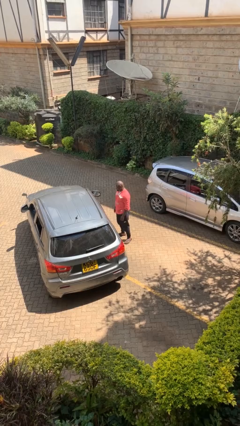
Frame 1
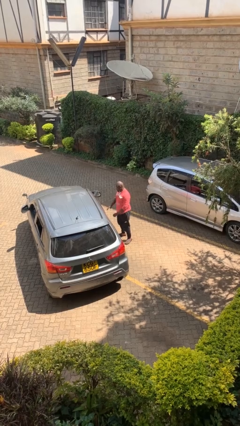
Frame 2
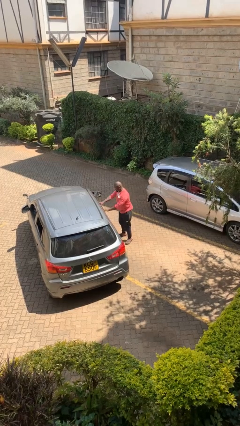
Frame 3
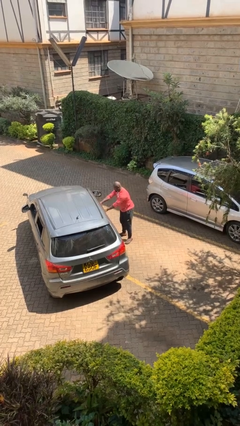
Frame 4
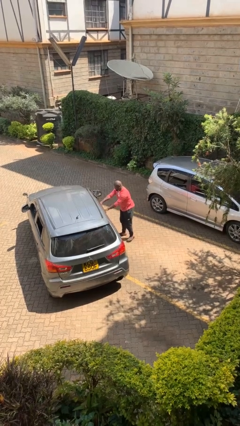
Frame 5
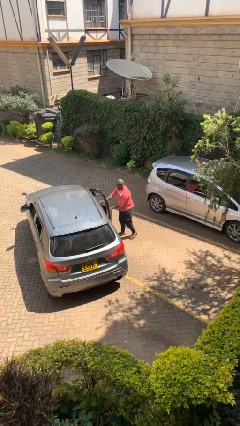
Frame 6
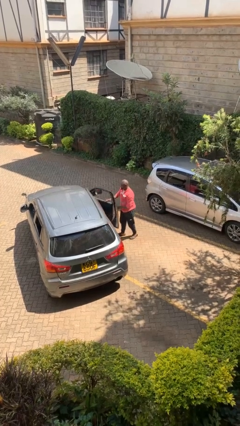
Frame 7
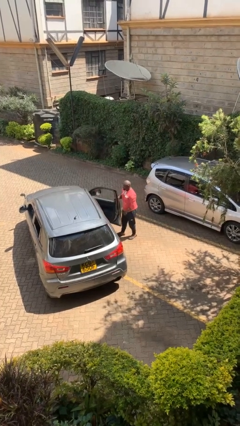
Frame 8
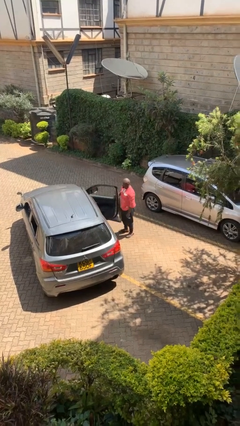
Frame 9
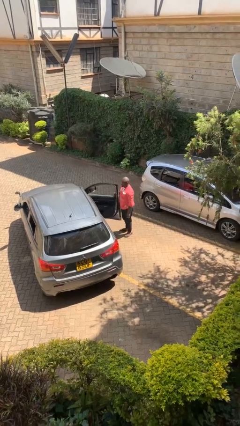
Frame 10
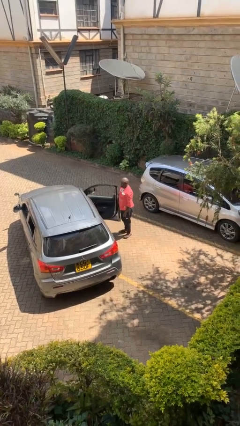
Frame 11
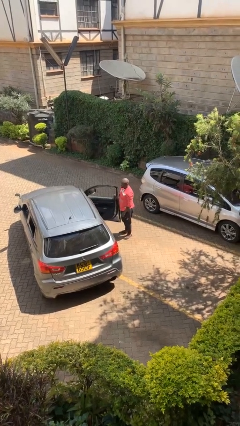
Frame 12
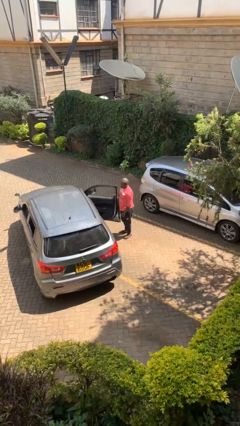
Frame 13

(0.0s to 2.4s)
person opens car door

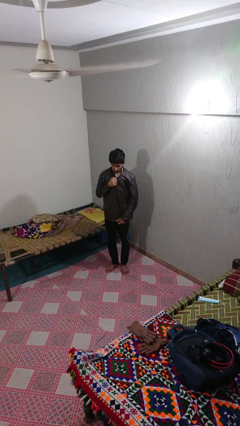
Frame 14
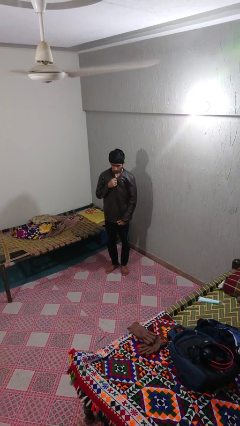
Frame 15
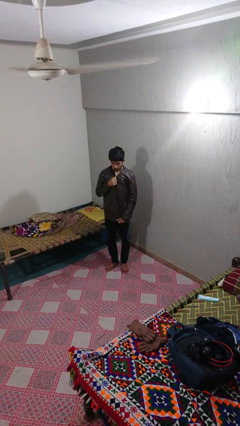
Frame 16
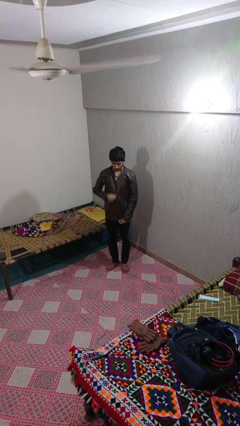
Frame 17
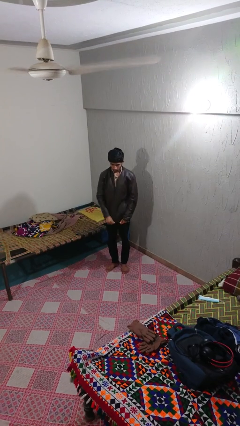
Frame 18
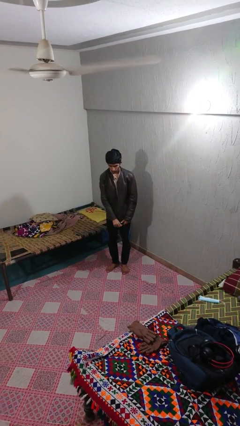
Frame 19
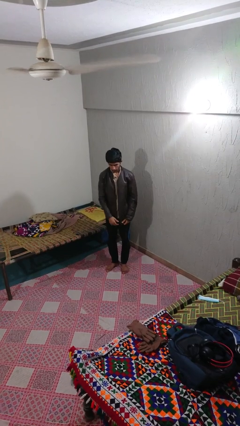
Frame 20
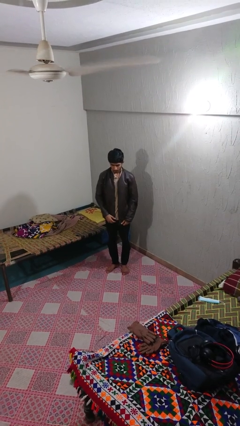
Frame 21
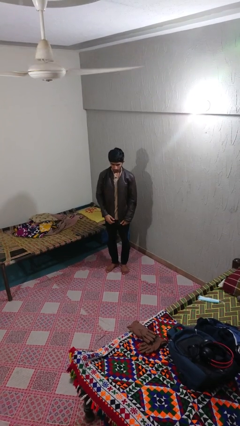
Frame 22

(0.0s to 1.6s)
person unzips jacket

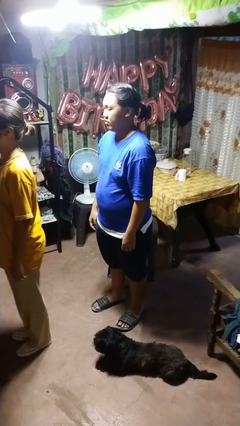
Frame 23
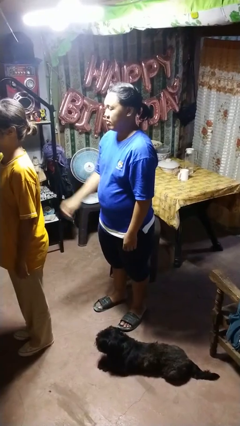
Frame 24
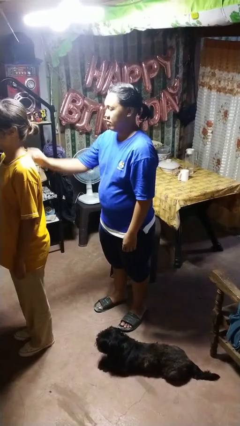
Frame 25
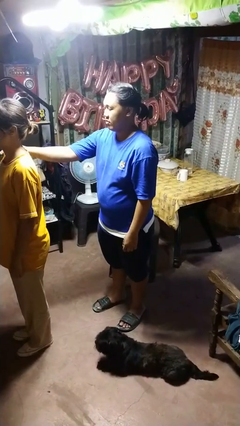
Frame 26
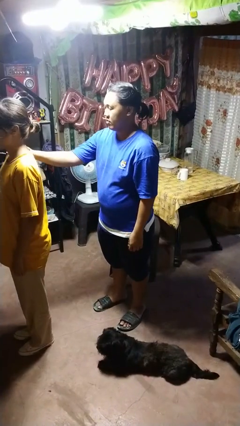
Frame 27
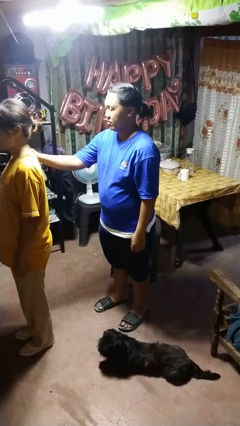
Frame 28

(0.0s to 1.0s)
person grabs person by shoulder

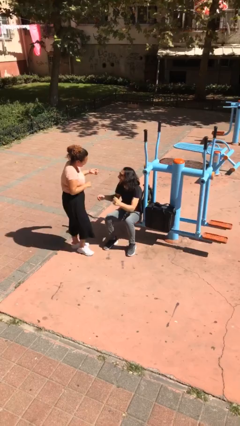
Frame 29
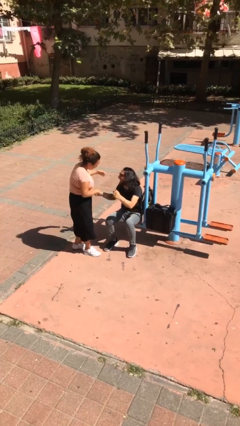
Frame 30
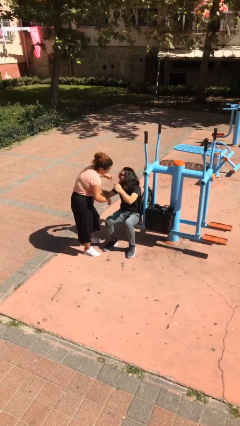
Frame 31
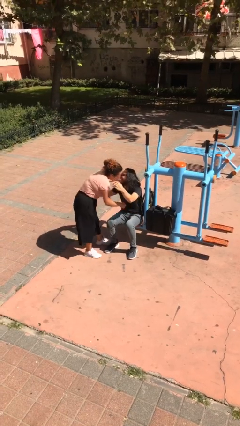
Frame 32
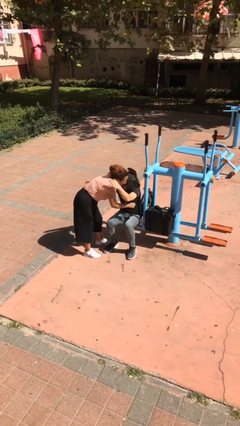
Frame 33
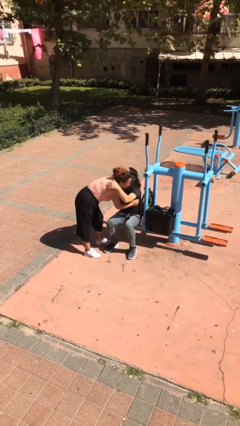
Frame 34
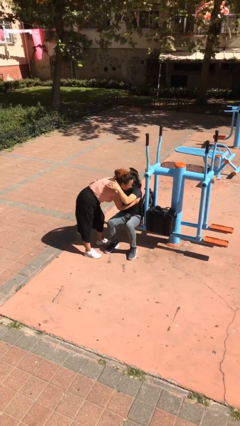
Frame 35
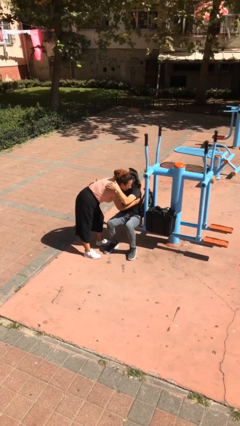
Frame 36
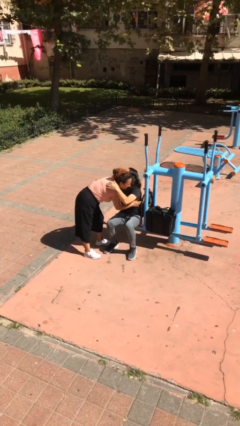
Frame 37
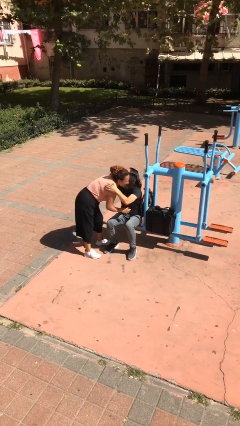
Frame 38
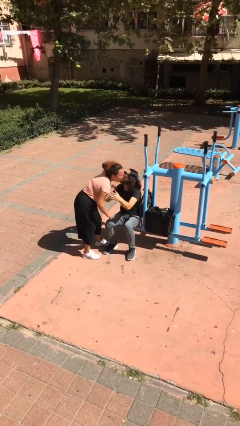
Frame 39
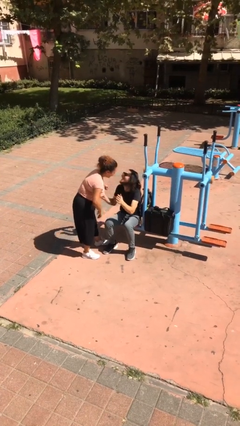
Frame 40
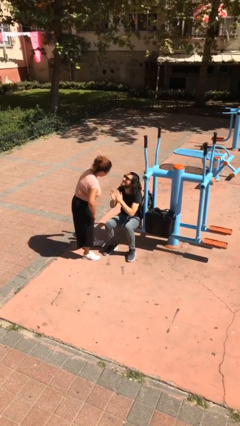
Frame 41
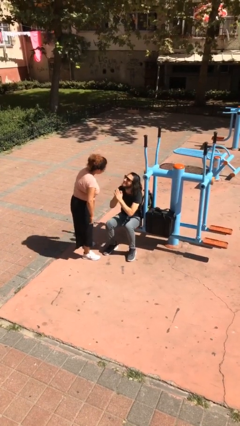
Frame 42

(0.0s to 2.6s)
person embraces person

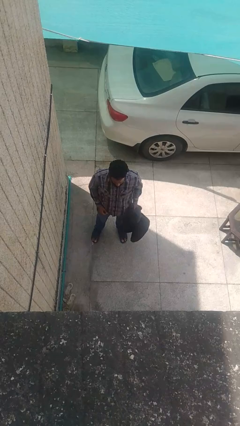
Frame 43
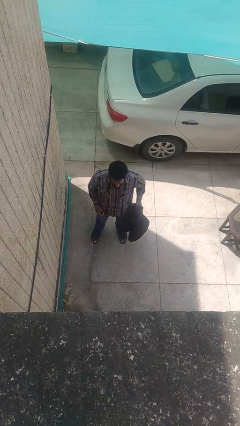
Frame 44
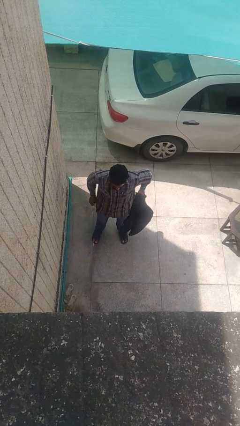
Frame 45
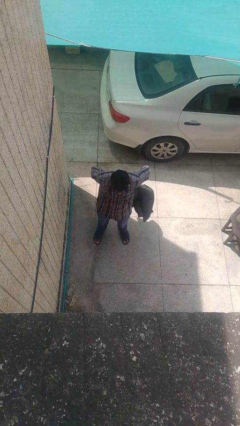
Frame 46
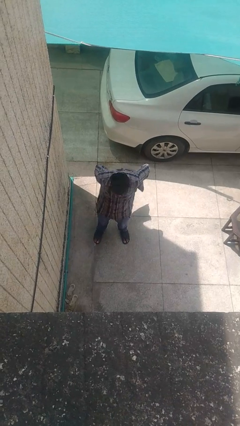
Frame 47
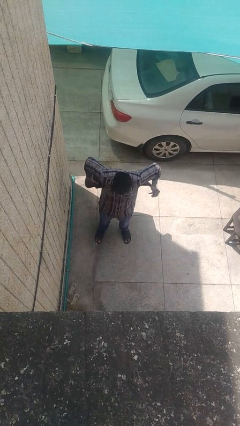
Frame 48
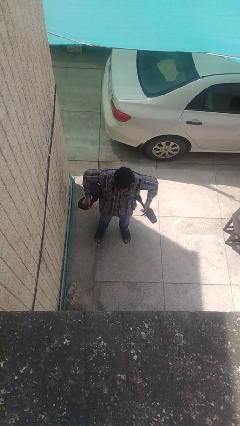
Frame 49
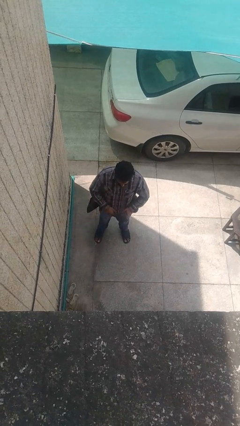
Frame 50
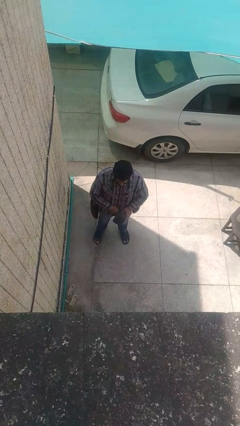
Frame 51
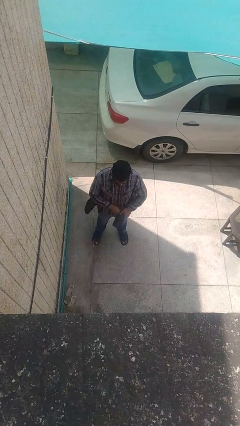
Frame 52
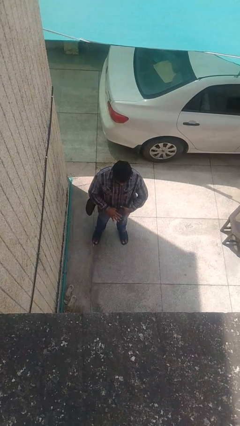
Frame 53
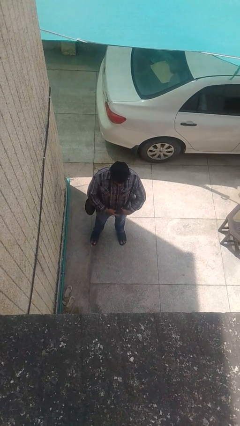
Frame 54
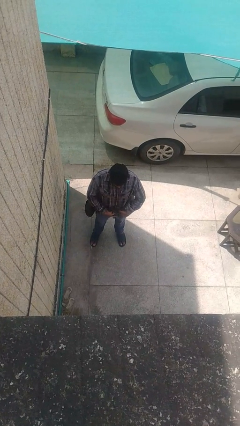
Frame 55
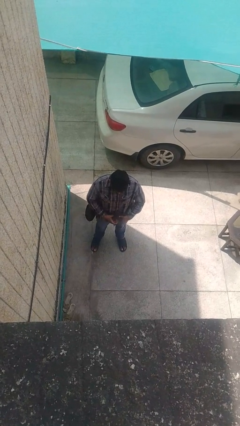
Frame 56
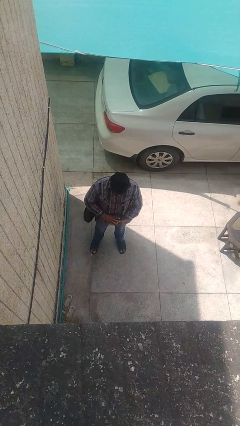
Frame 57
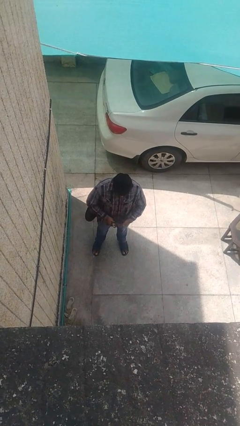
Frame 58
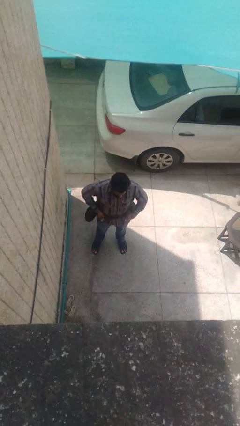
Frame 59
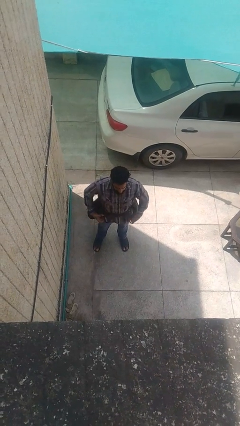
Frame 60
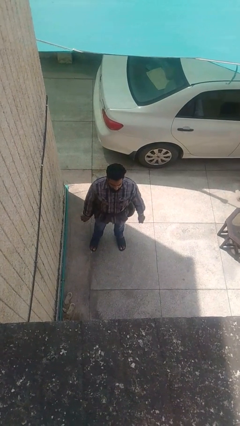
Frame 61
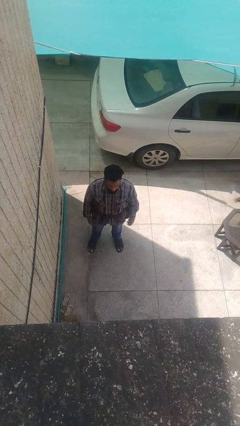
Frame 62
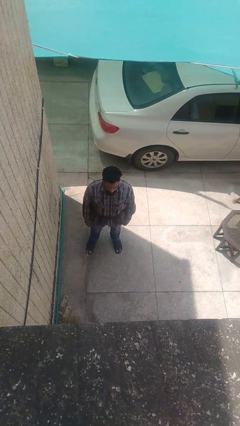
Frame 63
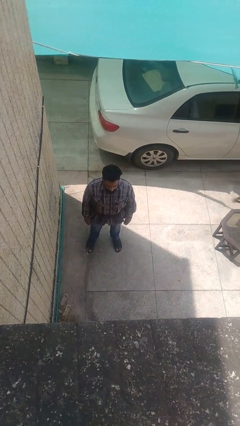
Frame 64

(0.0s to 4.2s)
person ties jacket around waist

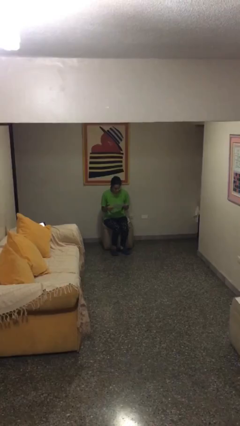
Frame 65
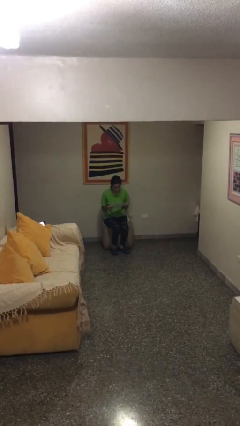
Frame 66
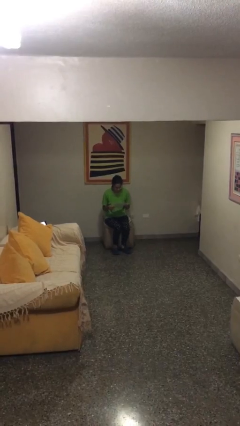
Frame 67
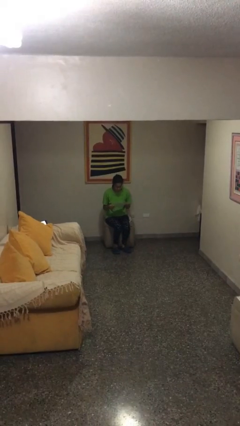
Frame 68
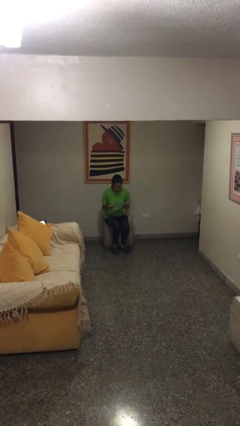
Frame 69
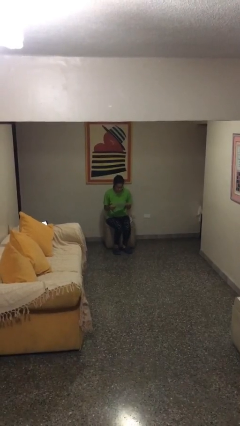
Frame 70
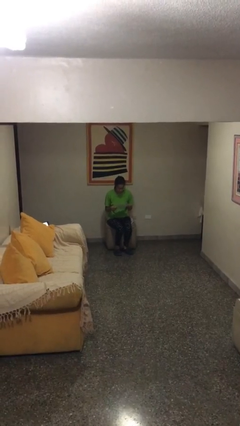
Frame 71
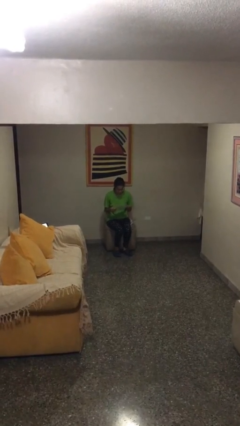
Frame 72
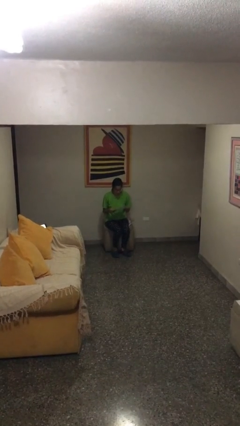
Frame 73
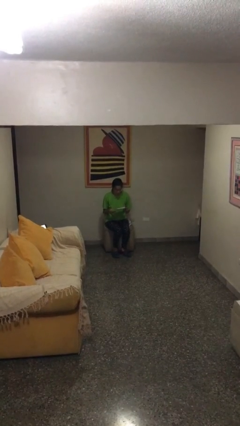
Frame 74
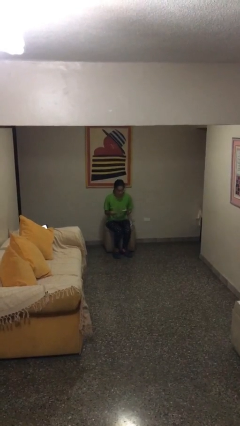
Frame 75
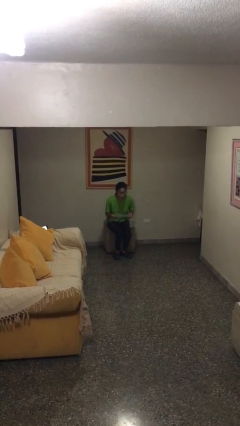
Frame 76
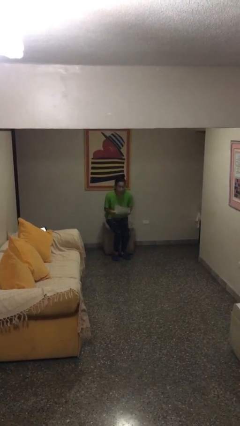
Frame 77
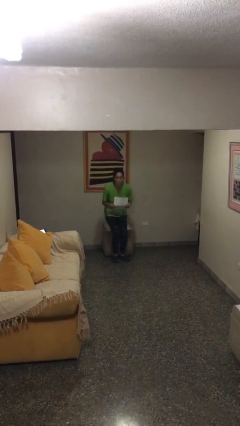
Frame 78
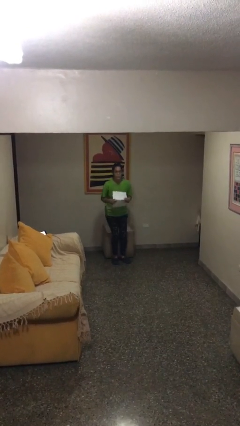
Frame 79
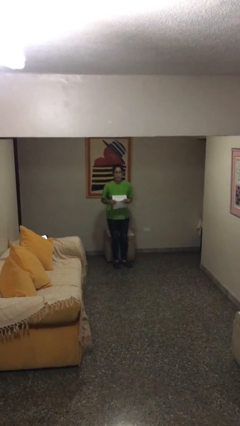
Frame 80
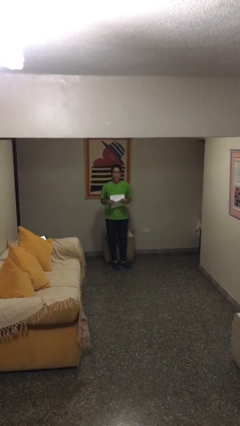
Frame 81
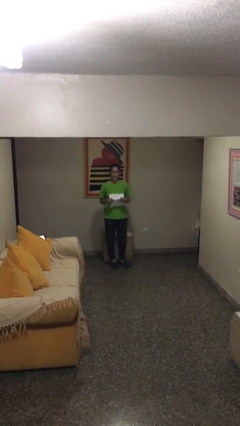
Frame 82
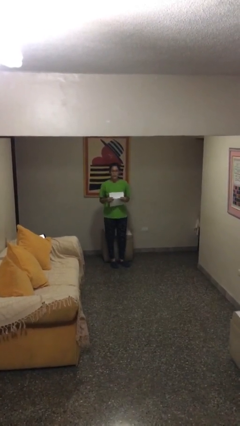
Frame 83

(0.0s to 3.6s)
person stands up

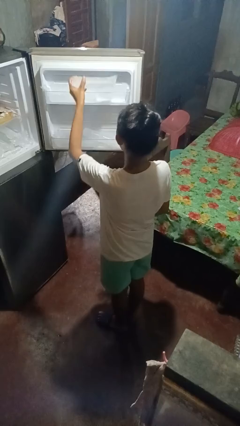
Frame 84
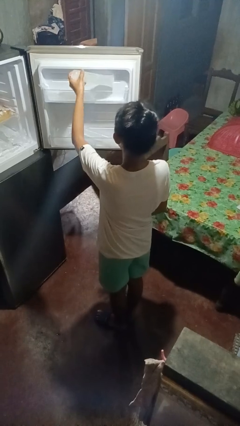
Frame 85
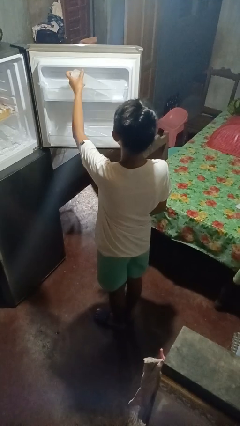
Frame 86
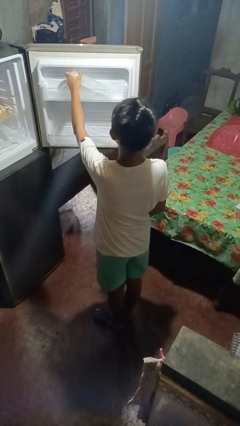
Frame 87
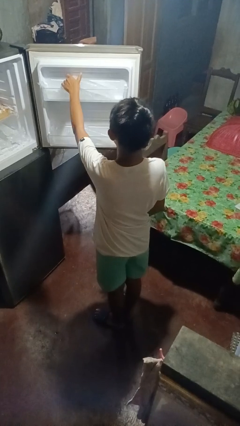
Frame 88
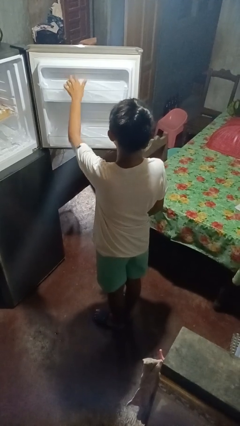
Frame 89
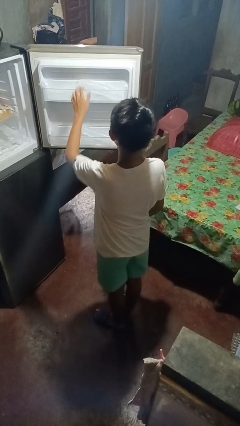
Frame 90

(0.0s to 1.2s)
person puts object into refrigerator

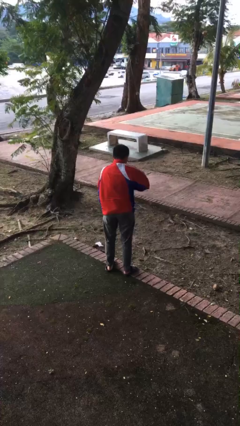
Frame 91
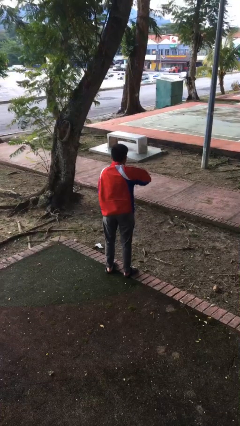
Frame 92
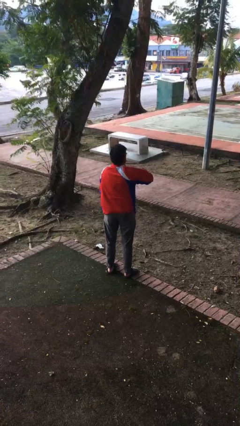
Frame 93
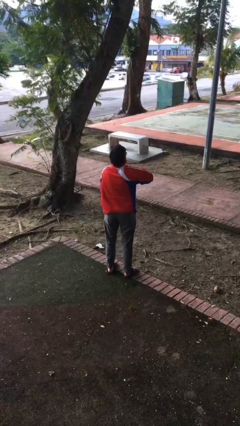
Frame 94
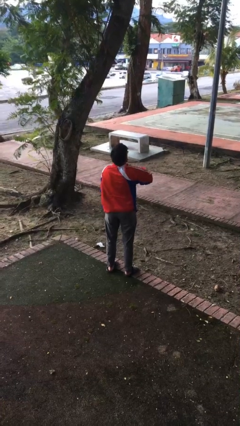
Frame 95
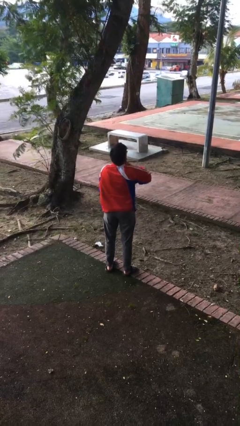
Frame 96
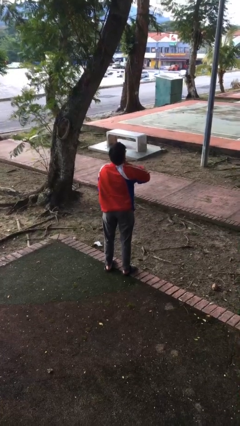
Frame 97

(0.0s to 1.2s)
person zips up jacket
